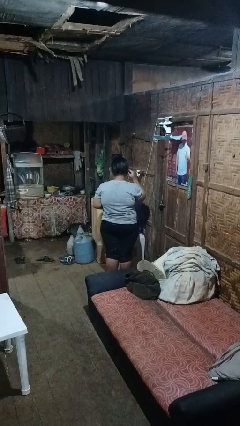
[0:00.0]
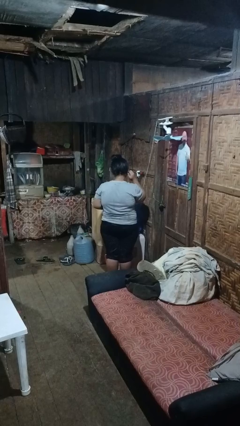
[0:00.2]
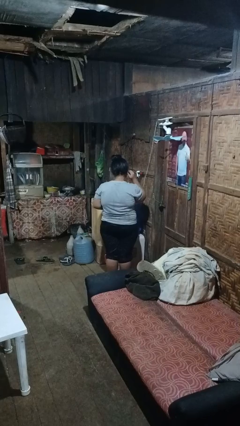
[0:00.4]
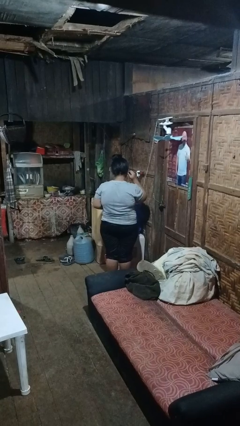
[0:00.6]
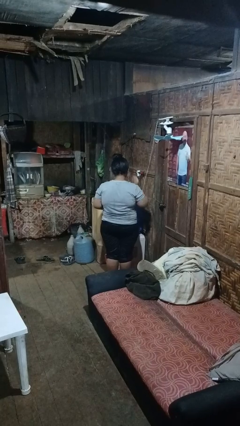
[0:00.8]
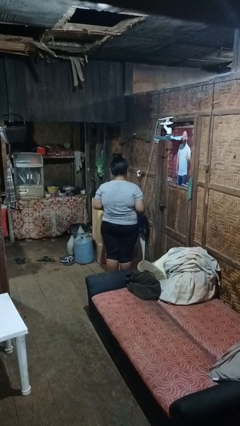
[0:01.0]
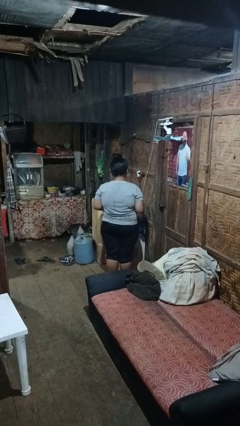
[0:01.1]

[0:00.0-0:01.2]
person puts on headphones

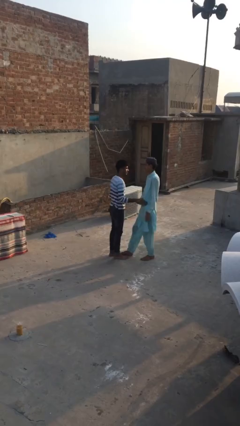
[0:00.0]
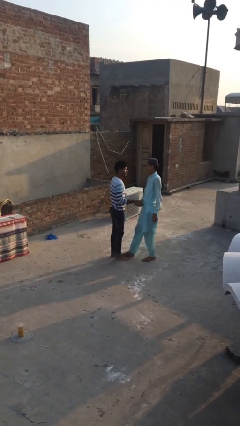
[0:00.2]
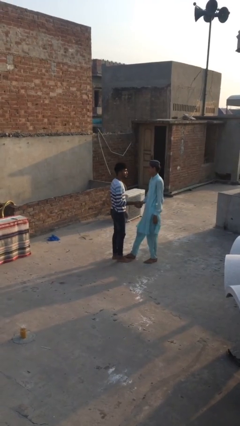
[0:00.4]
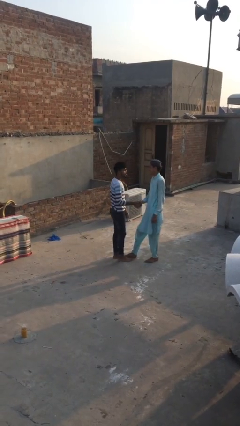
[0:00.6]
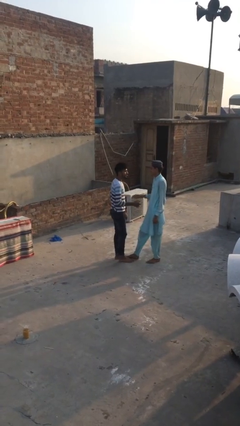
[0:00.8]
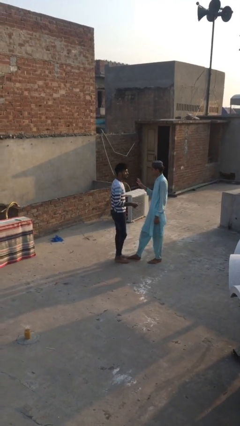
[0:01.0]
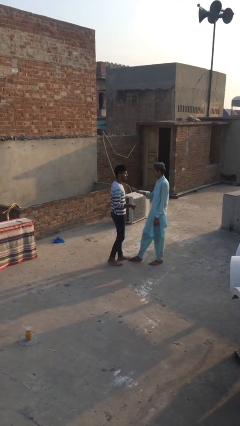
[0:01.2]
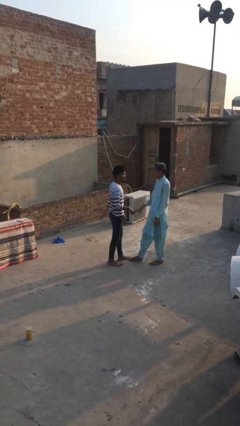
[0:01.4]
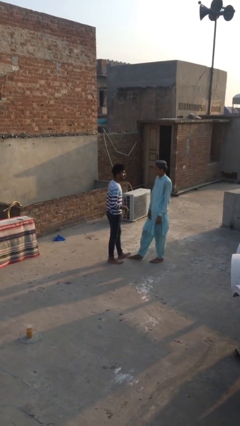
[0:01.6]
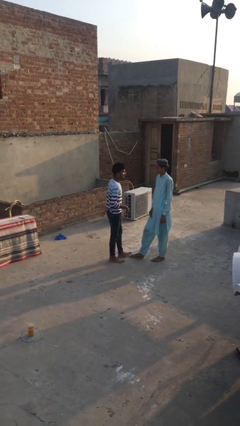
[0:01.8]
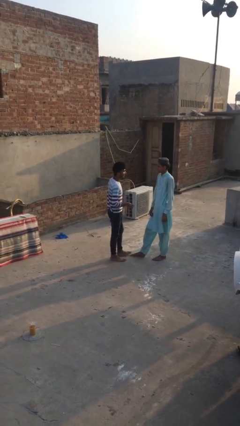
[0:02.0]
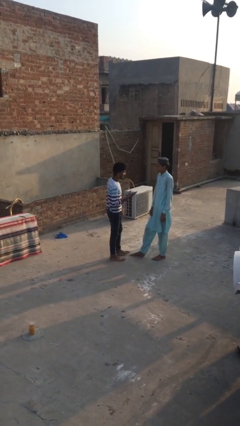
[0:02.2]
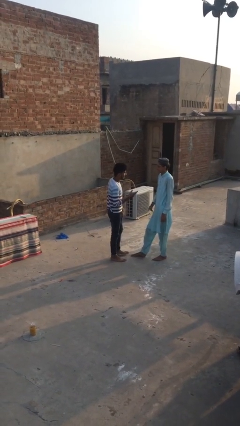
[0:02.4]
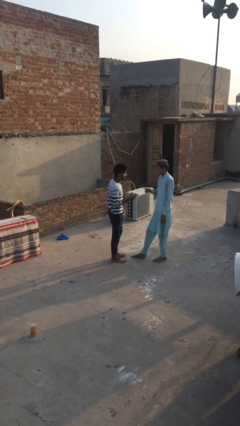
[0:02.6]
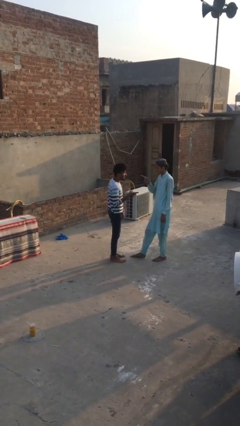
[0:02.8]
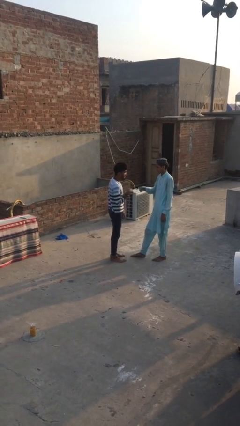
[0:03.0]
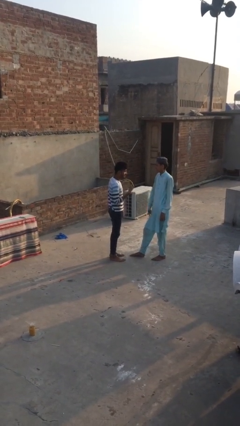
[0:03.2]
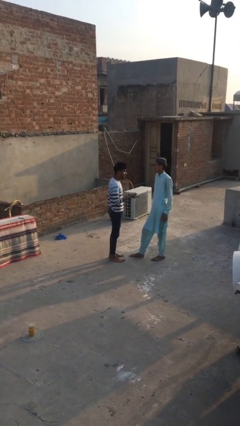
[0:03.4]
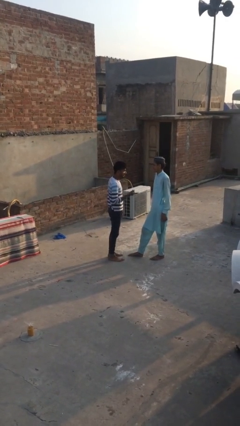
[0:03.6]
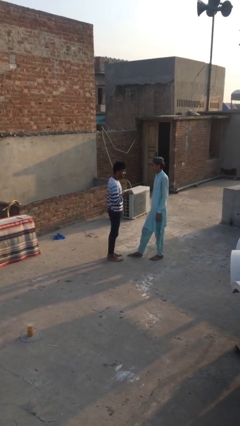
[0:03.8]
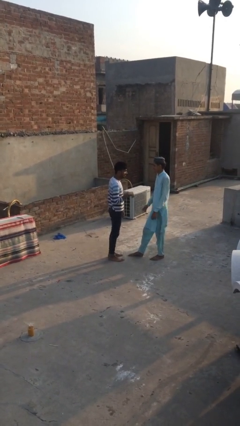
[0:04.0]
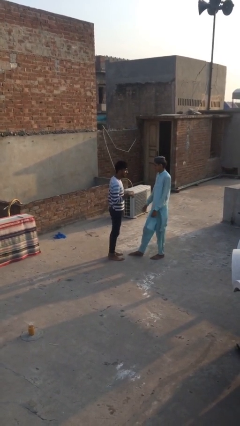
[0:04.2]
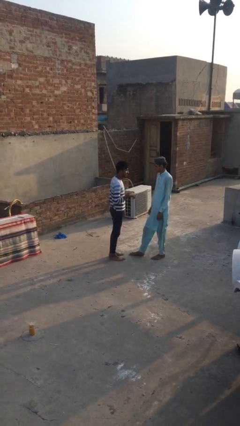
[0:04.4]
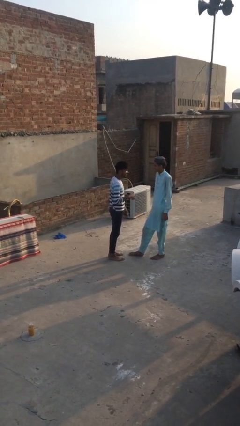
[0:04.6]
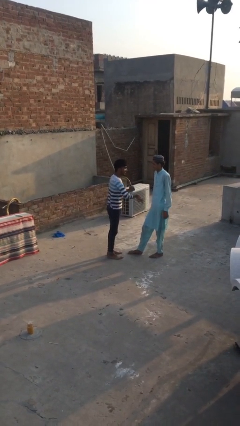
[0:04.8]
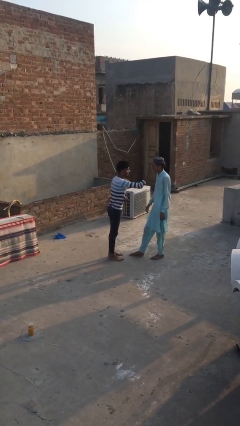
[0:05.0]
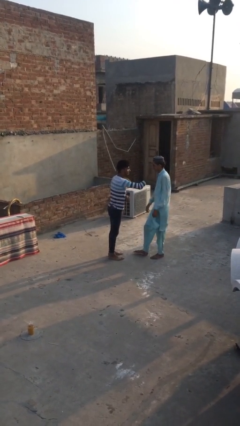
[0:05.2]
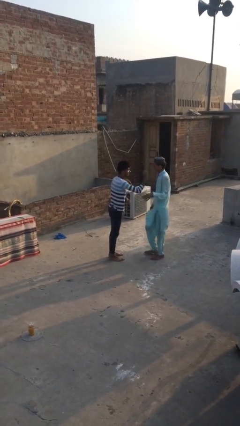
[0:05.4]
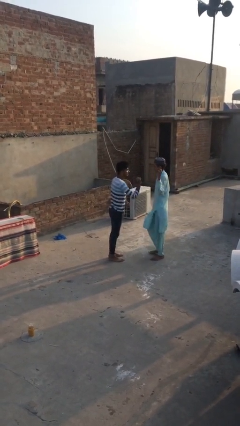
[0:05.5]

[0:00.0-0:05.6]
person talks to person

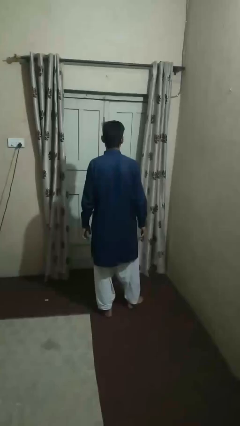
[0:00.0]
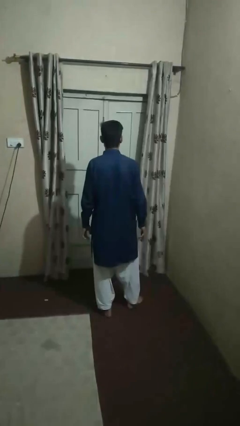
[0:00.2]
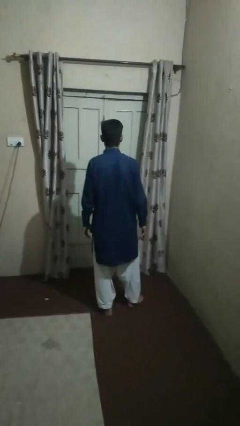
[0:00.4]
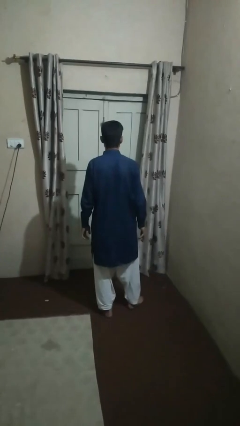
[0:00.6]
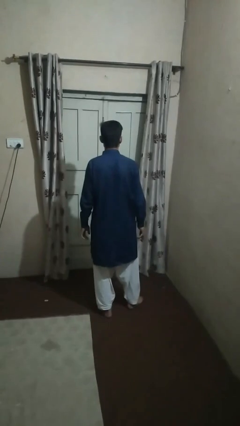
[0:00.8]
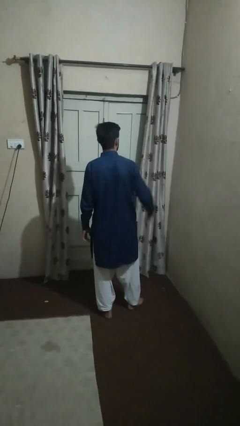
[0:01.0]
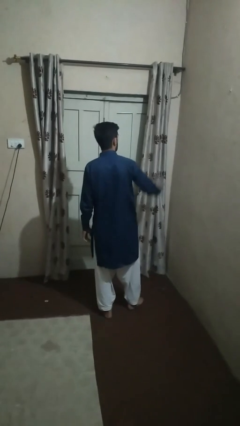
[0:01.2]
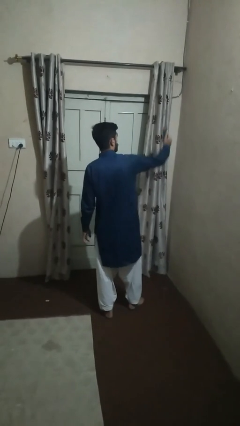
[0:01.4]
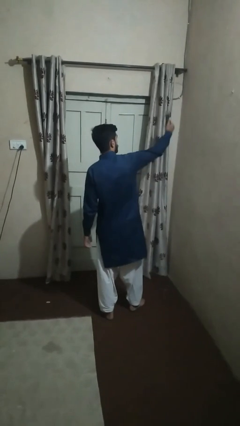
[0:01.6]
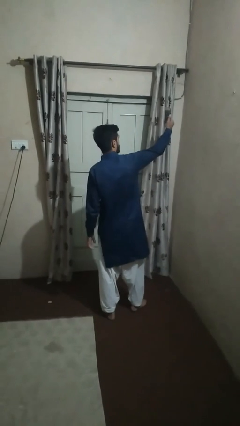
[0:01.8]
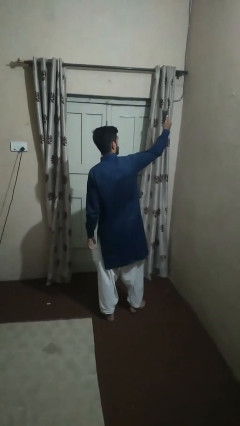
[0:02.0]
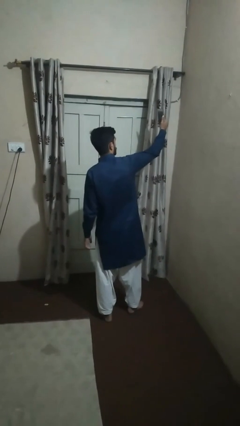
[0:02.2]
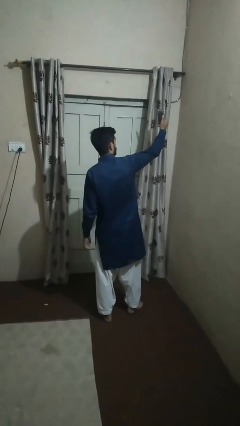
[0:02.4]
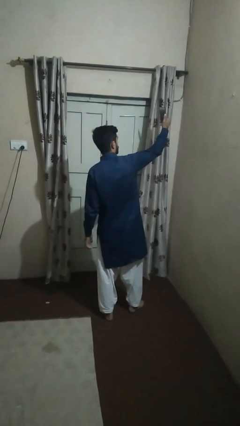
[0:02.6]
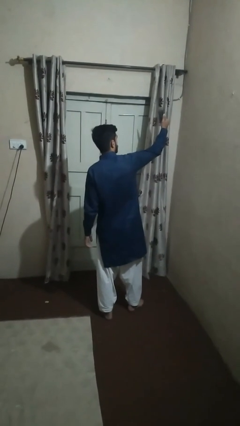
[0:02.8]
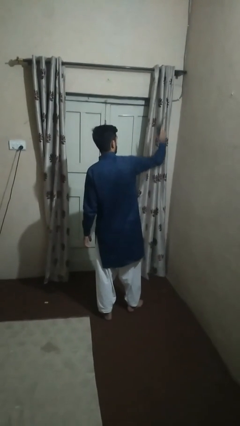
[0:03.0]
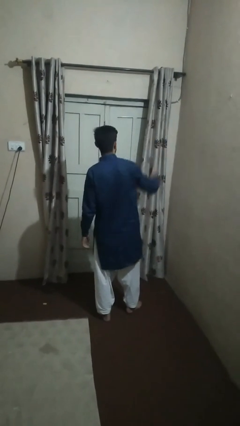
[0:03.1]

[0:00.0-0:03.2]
person takes selfie

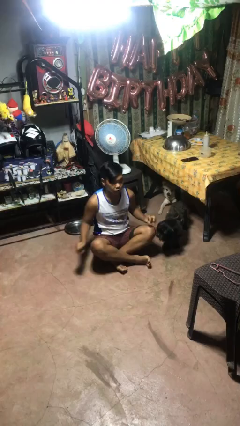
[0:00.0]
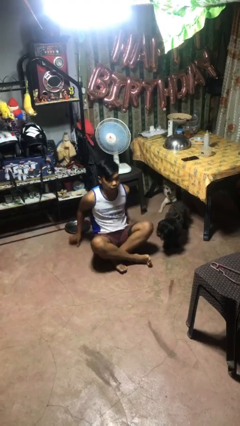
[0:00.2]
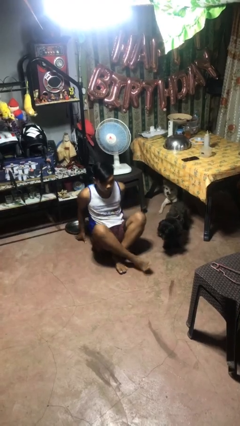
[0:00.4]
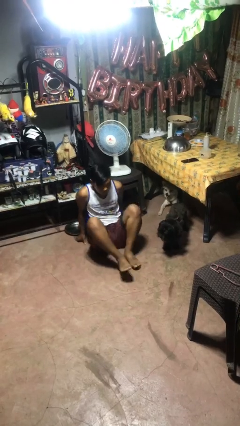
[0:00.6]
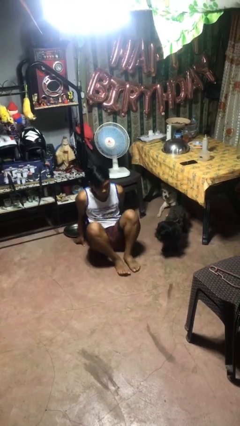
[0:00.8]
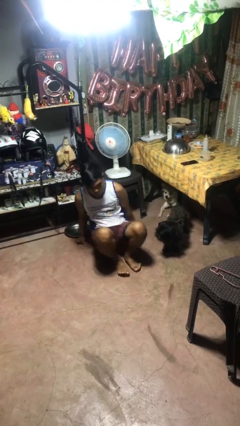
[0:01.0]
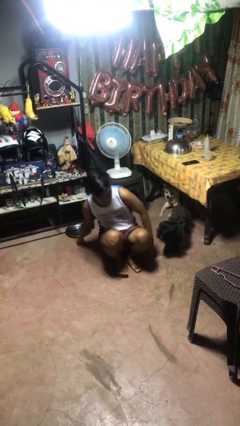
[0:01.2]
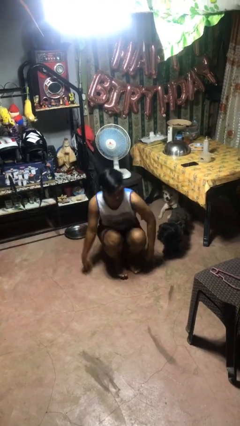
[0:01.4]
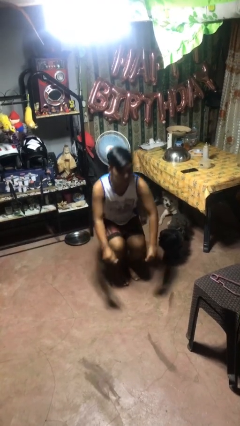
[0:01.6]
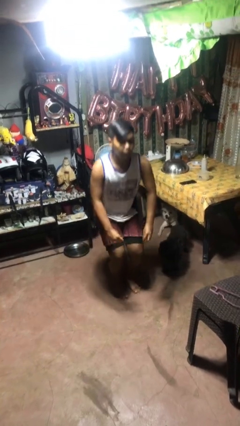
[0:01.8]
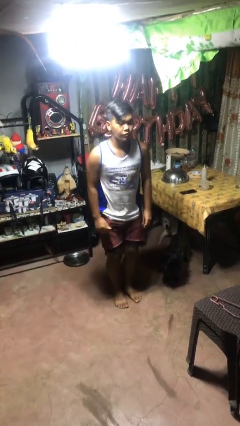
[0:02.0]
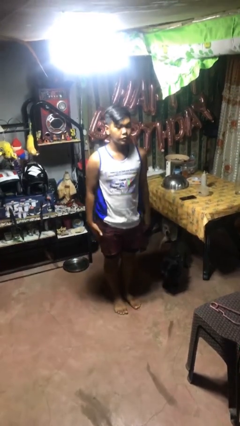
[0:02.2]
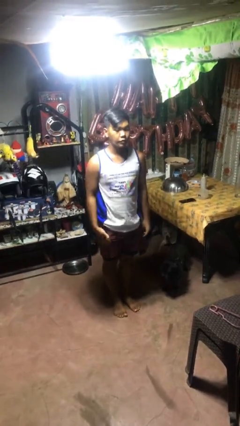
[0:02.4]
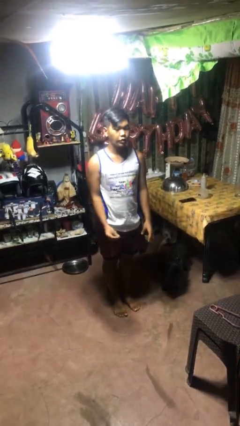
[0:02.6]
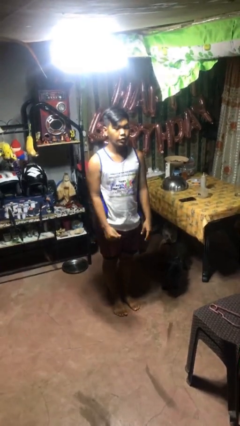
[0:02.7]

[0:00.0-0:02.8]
person stands up from floor

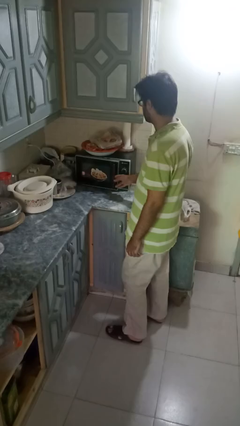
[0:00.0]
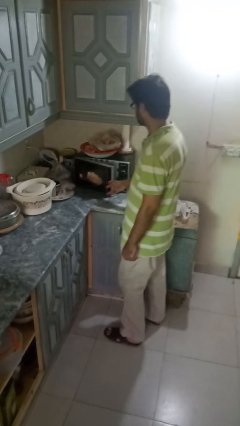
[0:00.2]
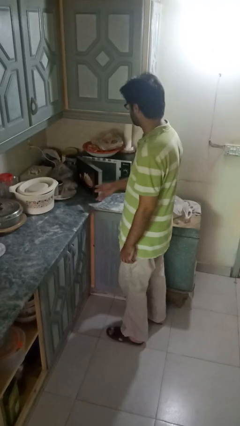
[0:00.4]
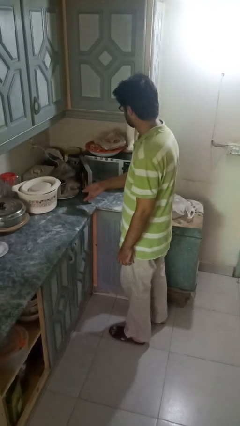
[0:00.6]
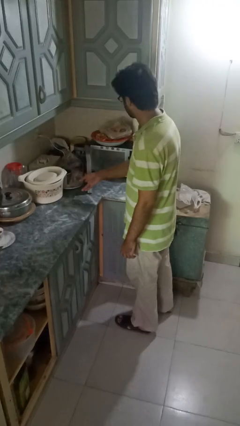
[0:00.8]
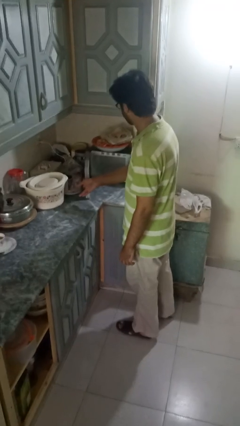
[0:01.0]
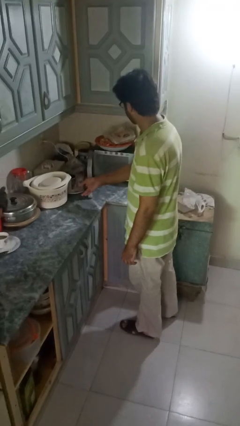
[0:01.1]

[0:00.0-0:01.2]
person opens microwave

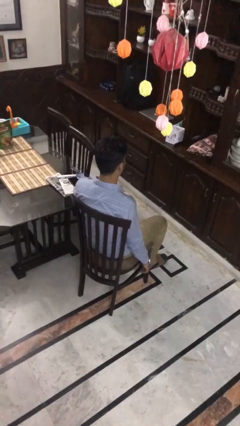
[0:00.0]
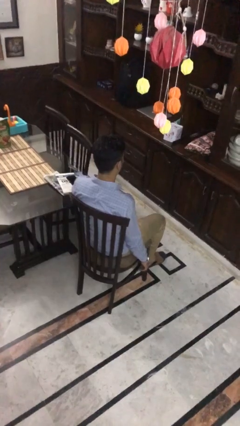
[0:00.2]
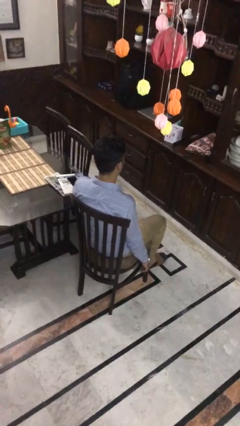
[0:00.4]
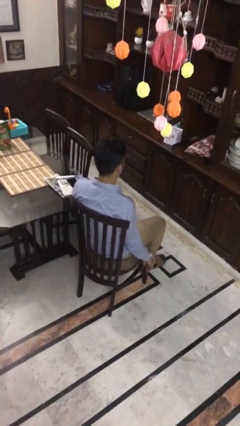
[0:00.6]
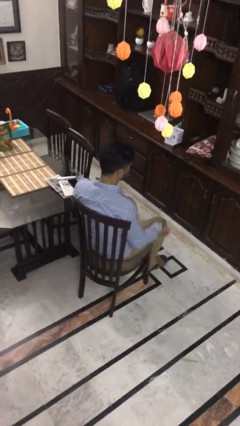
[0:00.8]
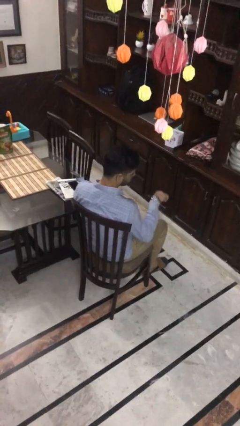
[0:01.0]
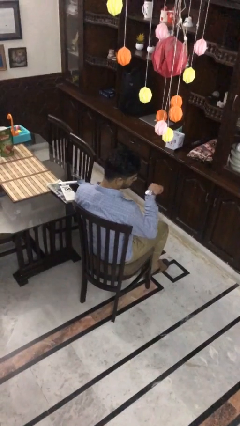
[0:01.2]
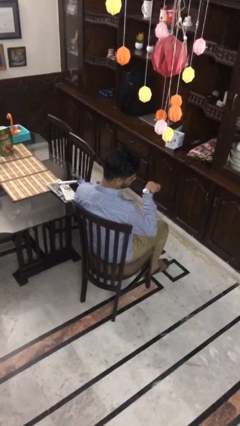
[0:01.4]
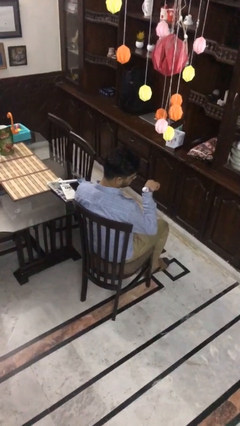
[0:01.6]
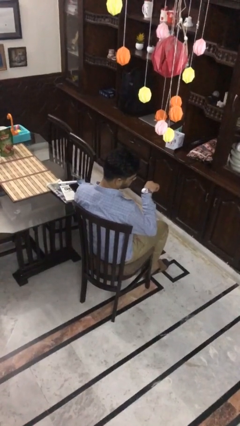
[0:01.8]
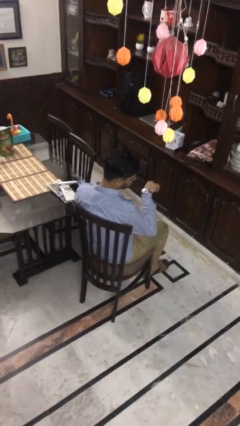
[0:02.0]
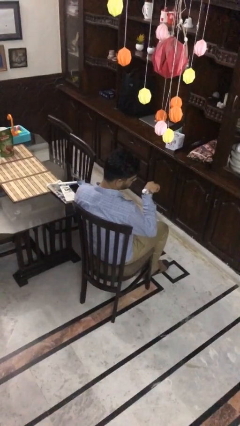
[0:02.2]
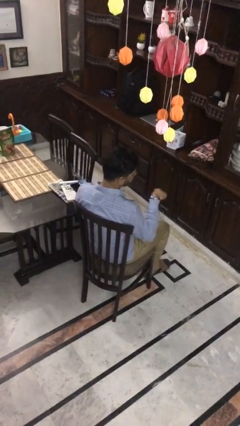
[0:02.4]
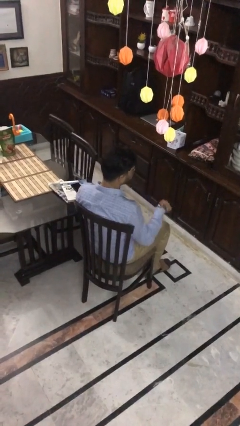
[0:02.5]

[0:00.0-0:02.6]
person looks at wristwatch

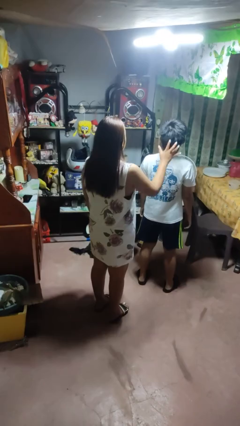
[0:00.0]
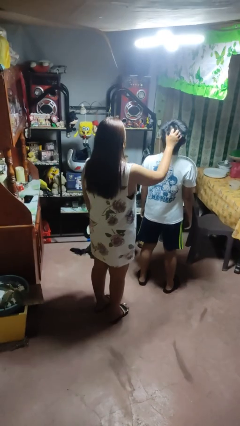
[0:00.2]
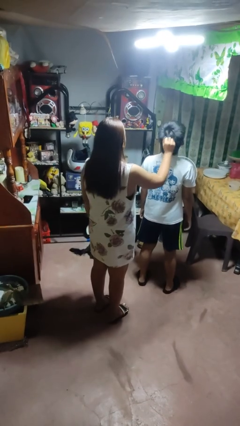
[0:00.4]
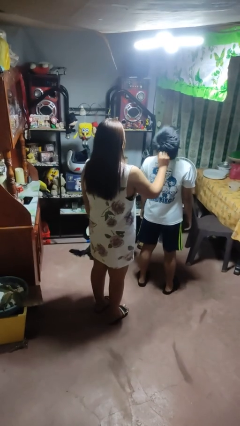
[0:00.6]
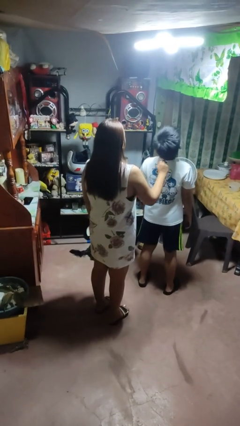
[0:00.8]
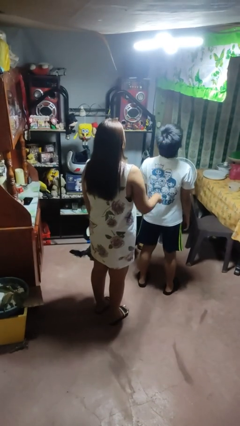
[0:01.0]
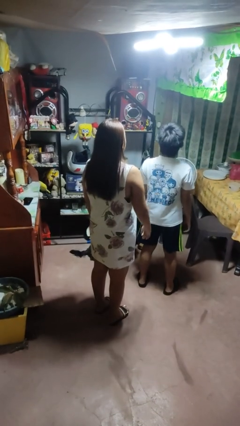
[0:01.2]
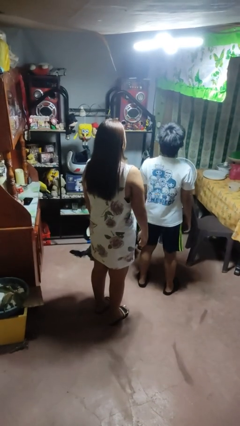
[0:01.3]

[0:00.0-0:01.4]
person grabs person by hair
